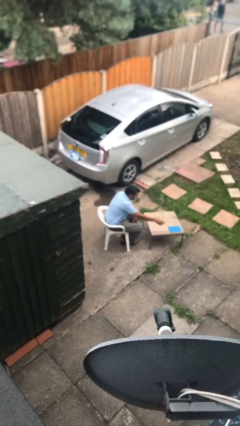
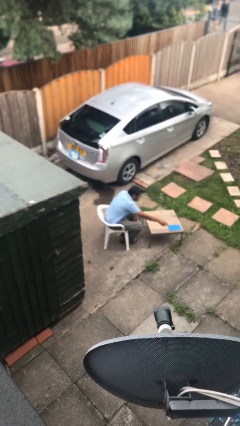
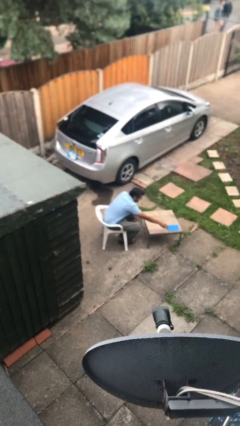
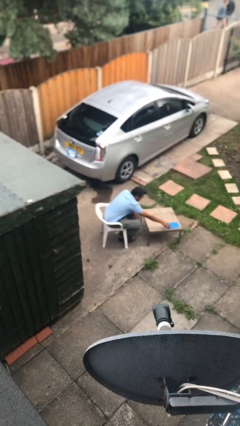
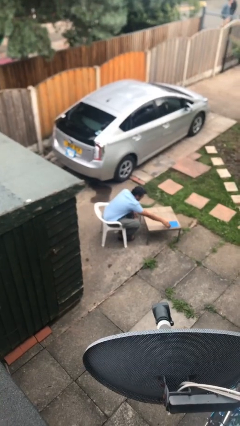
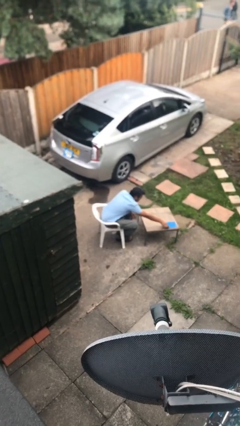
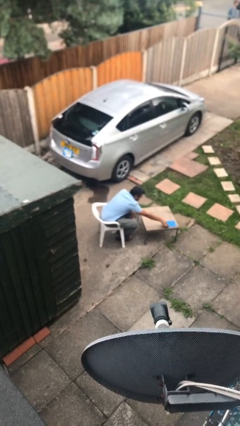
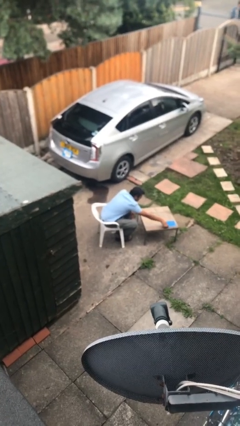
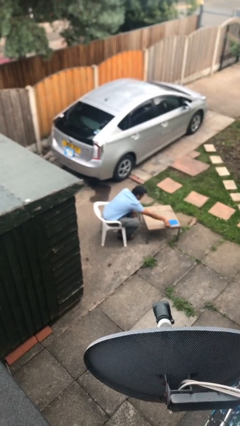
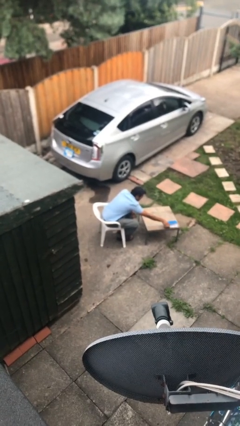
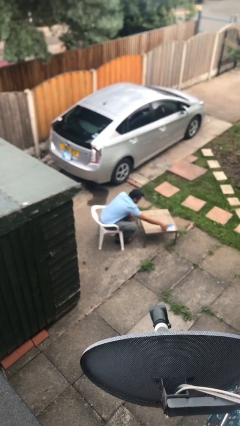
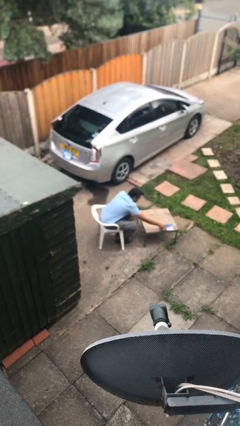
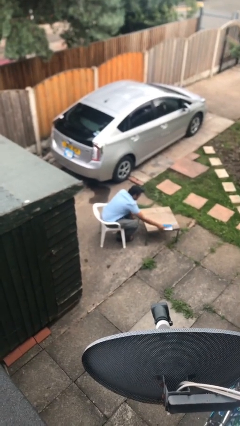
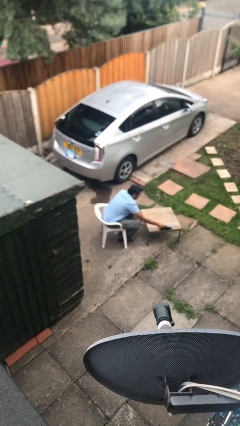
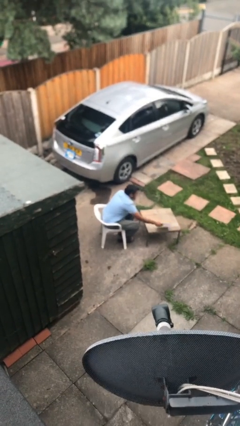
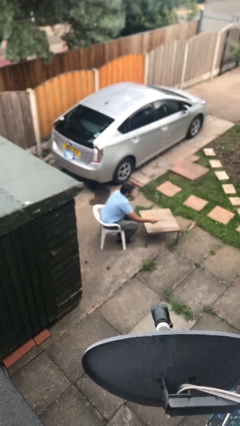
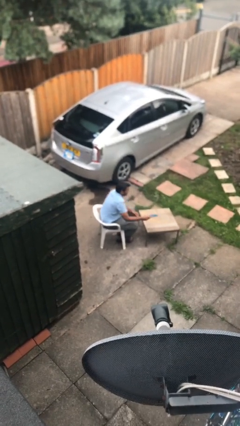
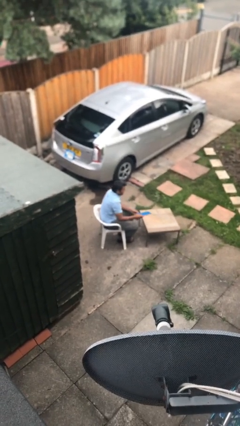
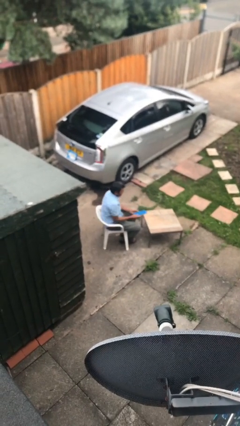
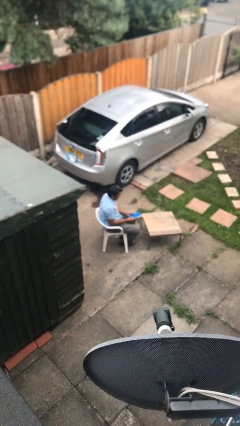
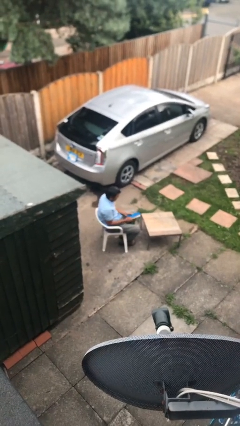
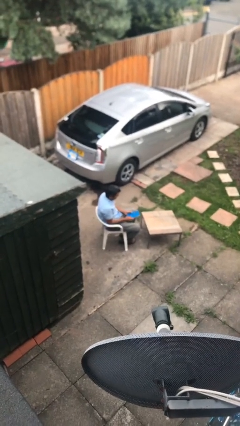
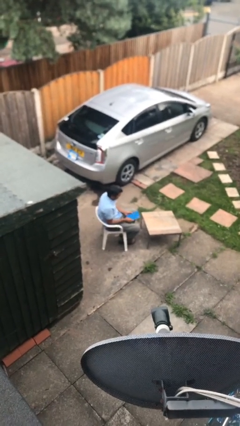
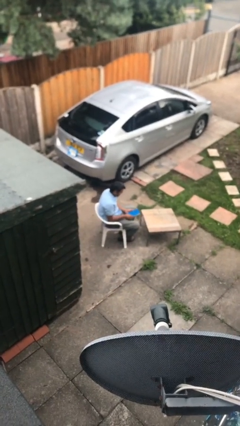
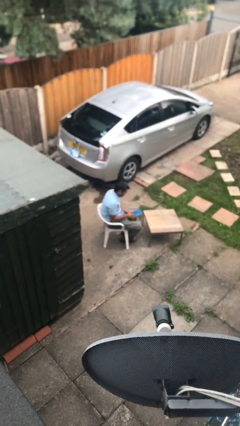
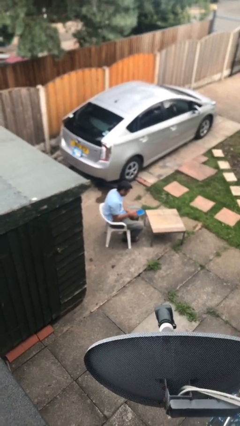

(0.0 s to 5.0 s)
person picks up object from table

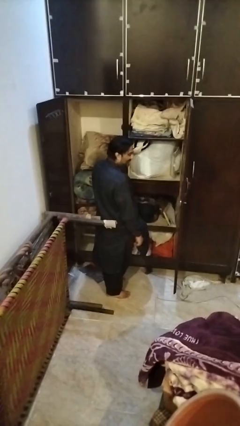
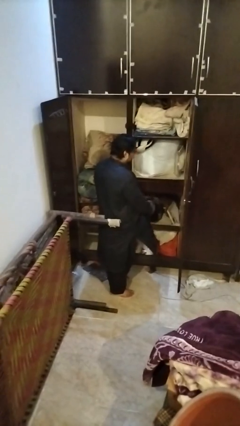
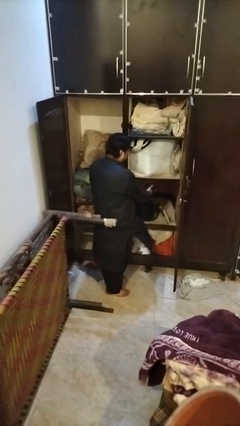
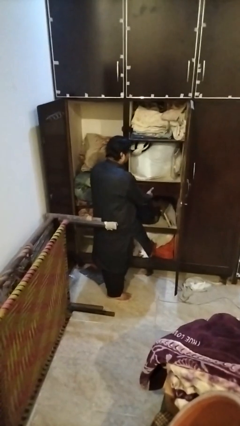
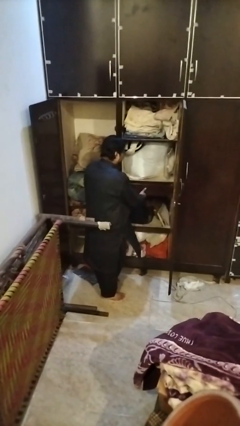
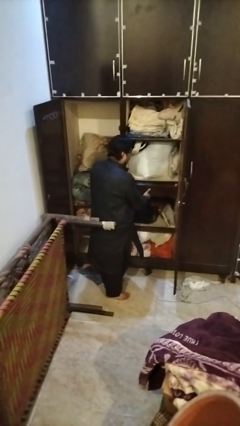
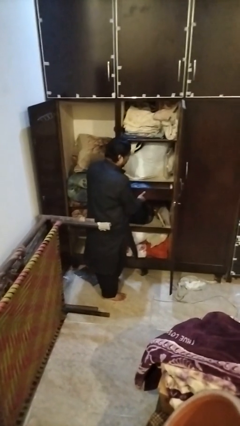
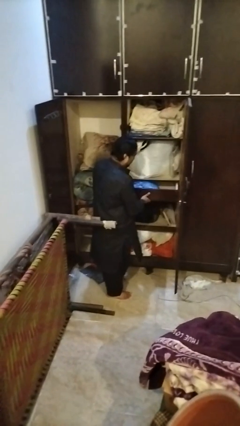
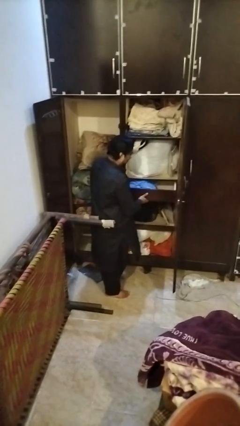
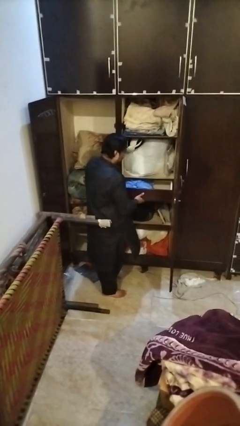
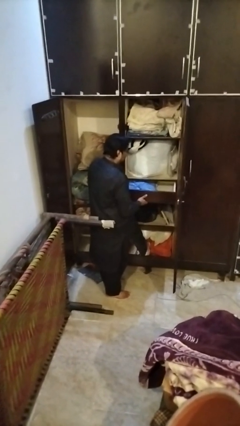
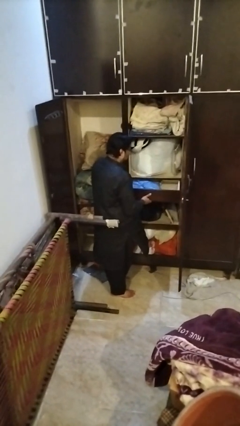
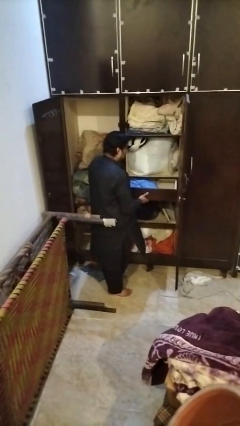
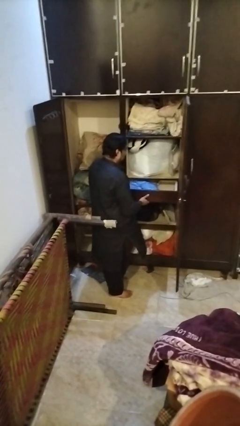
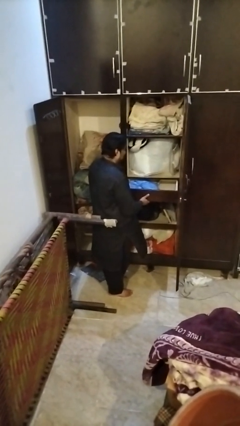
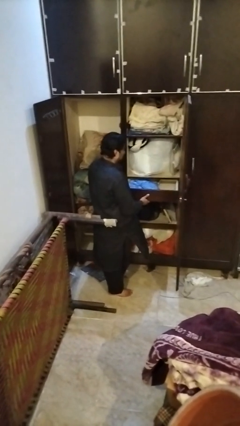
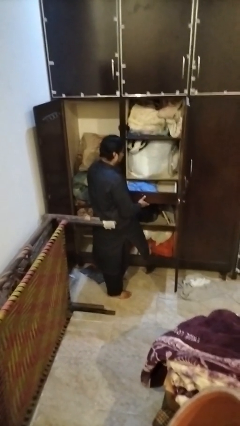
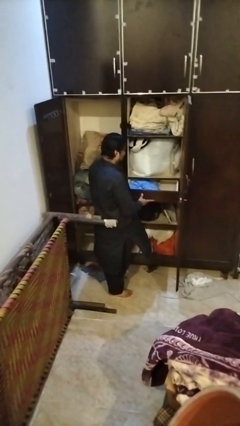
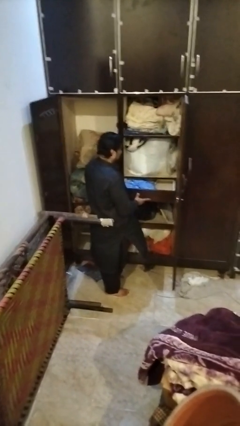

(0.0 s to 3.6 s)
person opens dresser drawer

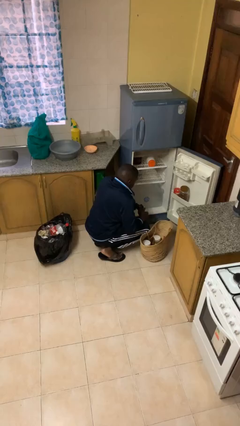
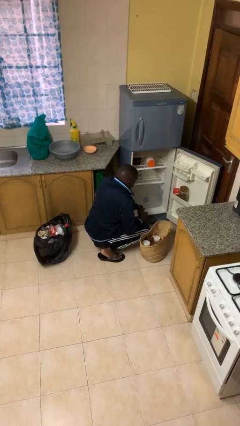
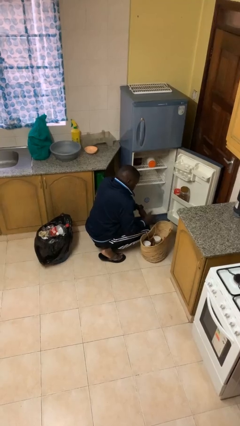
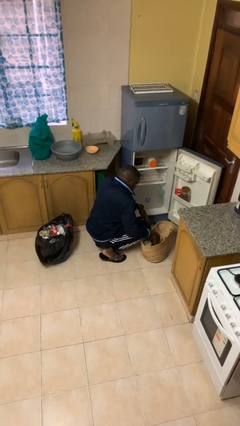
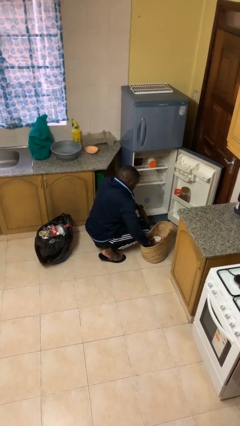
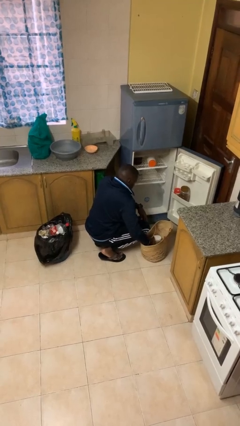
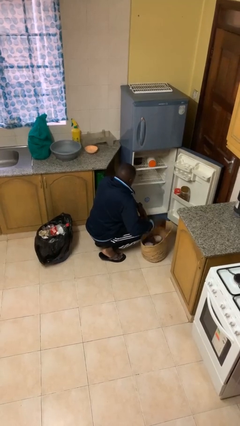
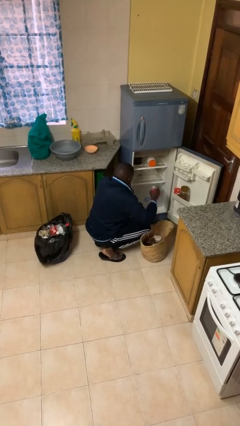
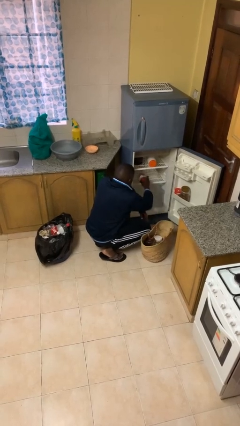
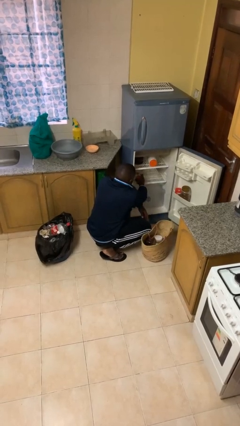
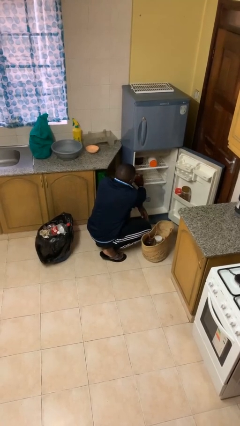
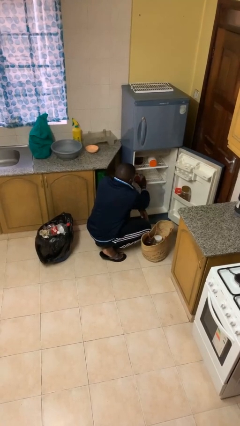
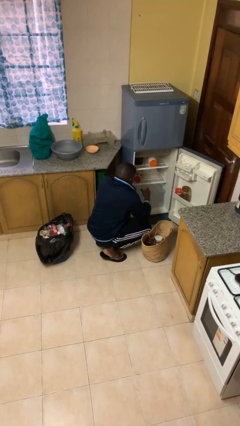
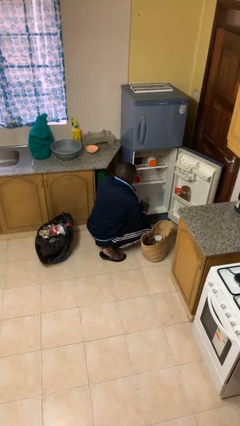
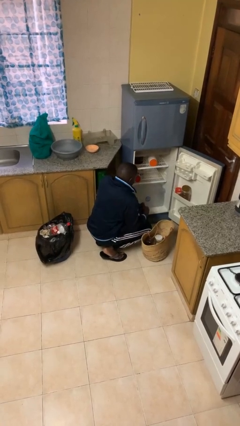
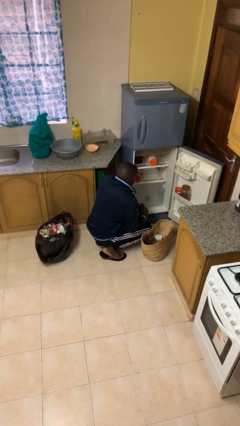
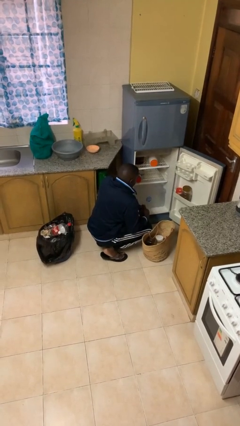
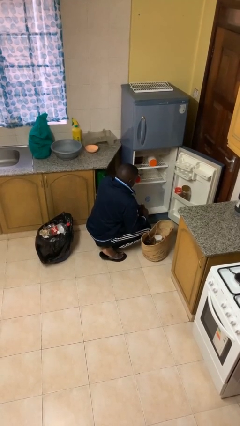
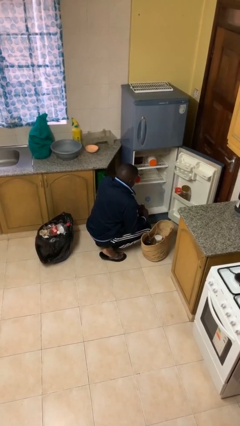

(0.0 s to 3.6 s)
person loads groceries into refrigerator

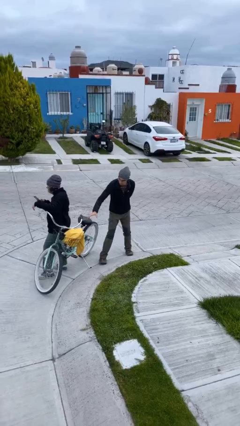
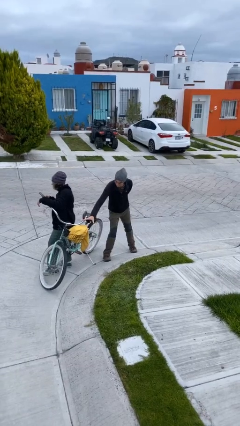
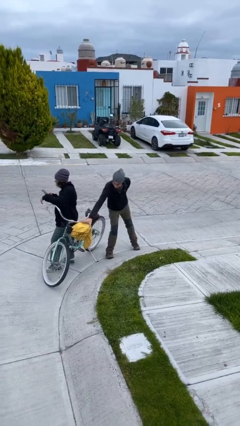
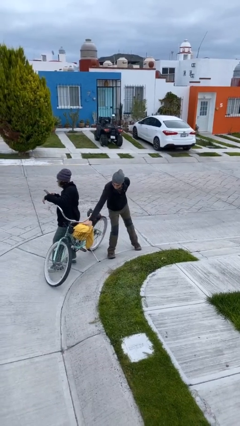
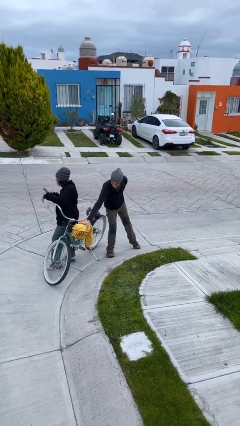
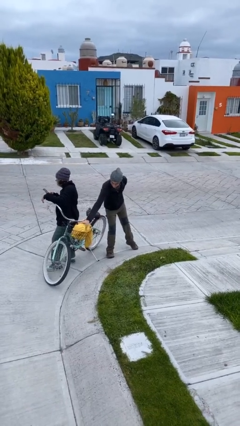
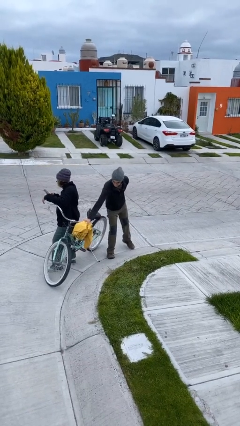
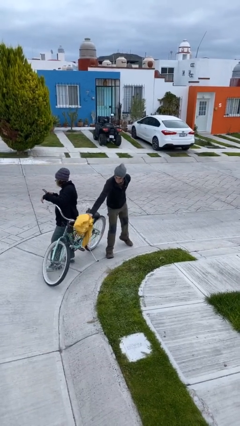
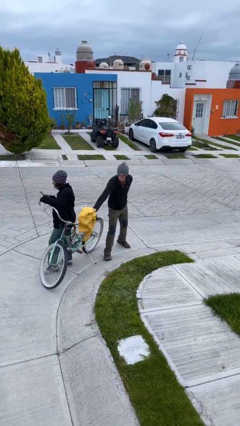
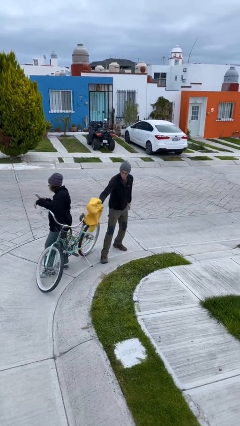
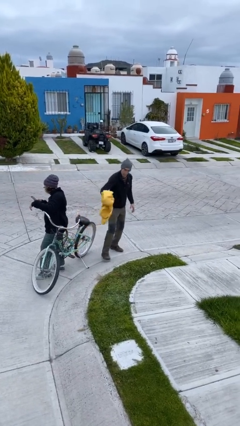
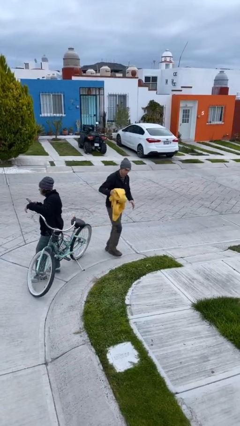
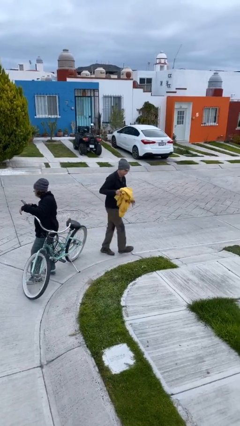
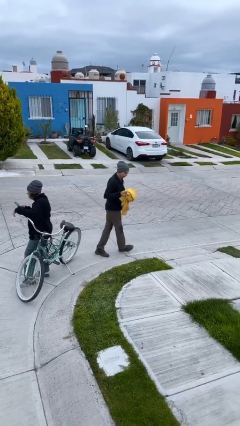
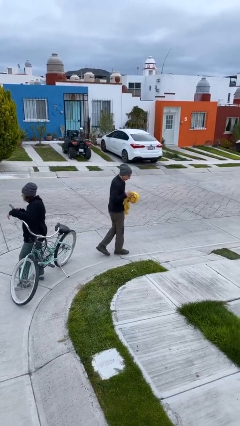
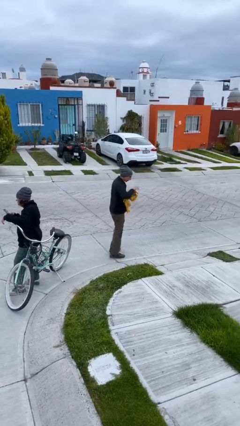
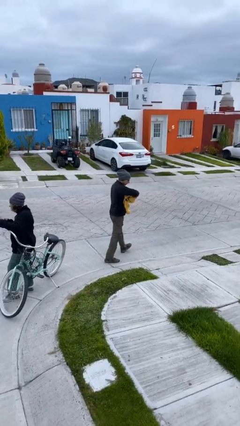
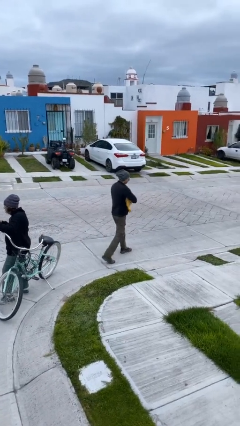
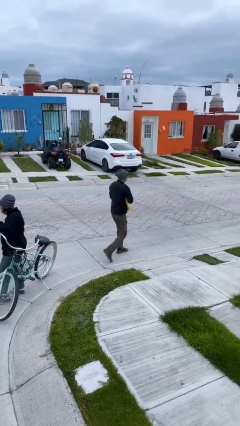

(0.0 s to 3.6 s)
person steals object from person

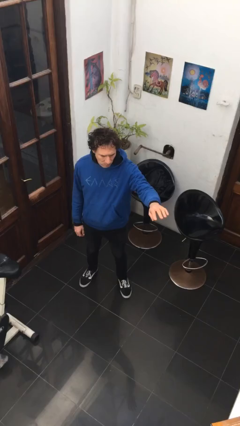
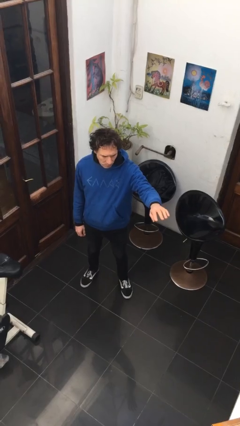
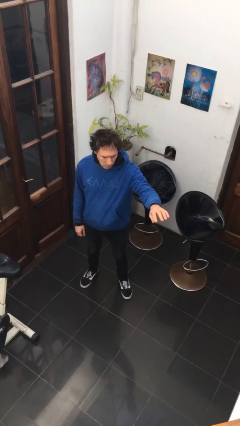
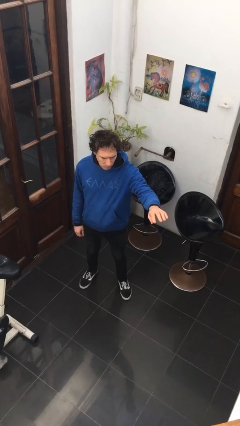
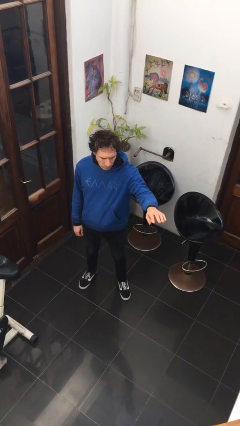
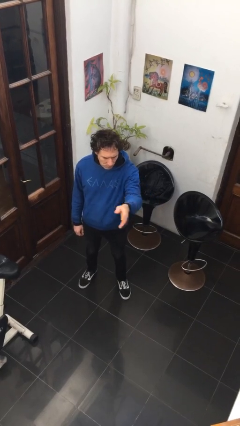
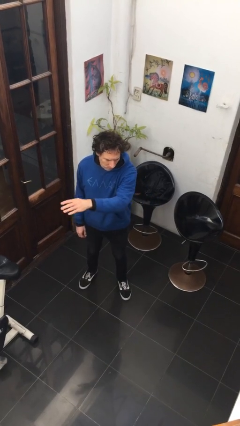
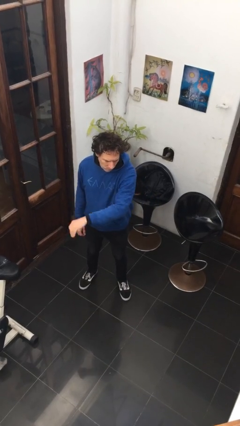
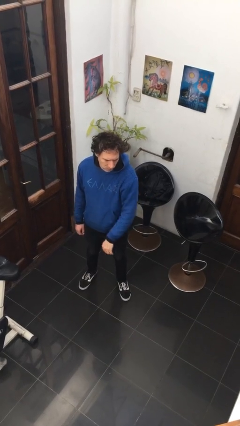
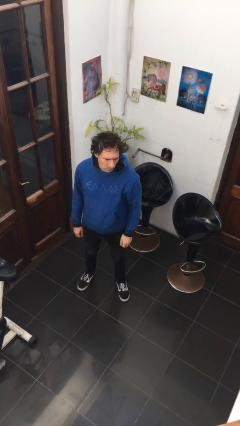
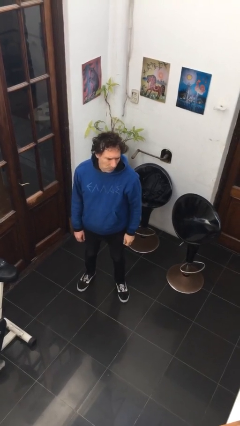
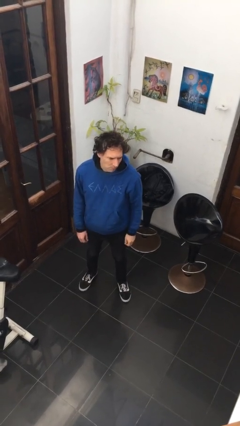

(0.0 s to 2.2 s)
person gestures swipe right
